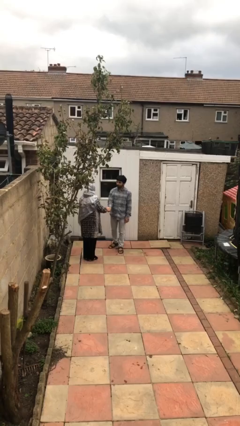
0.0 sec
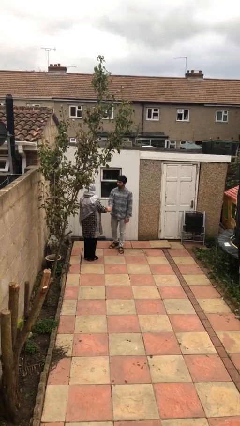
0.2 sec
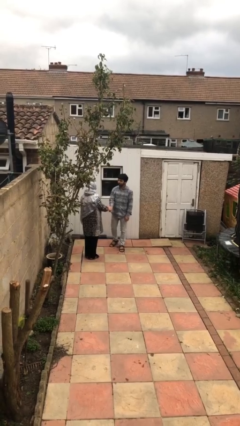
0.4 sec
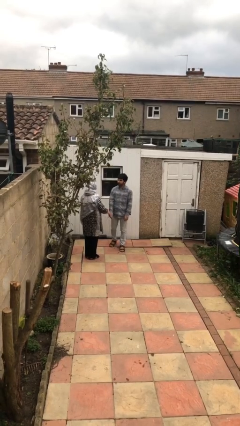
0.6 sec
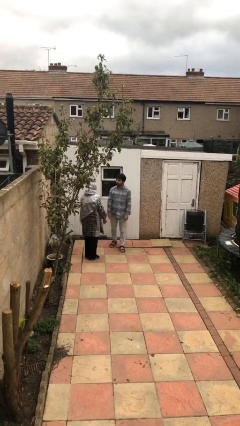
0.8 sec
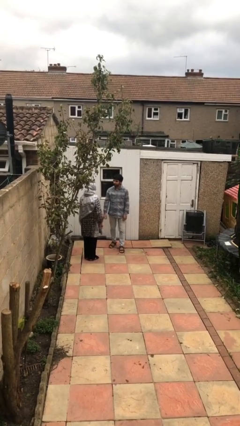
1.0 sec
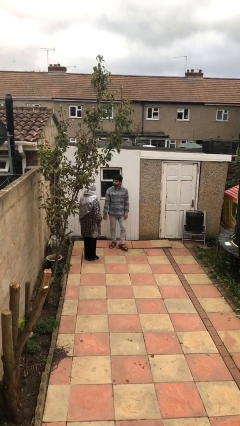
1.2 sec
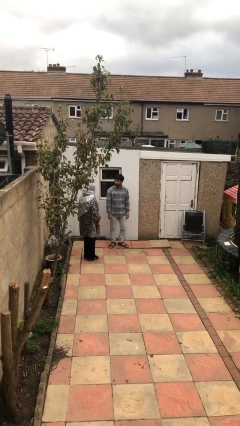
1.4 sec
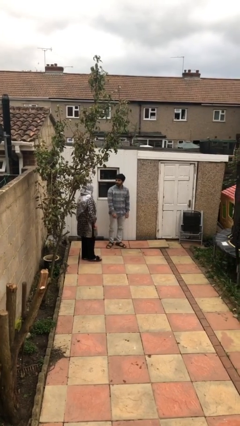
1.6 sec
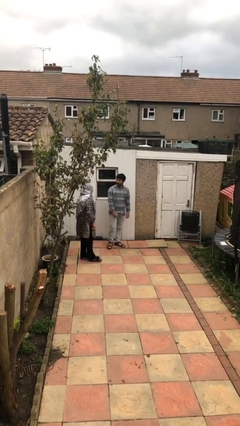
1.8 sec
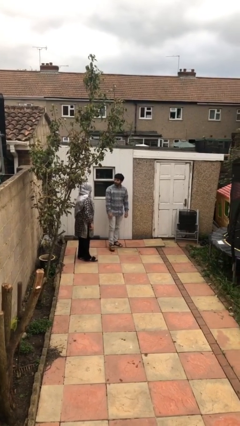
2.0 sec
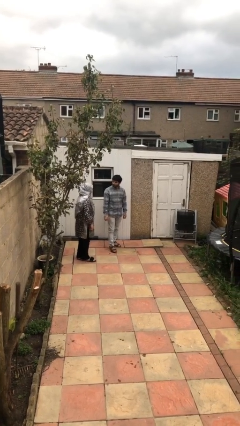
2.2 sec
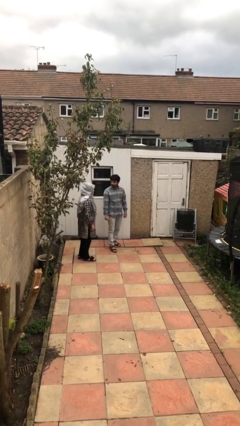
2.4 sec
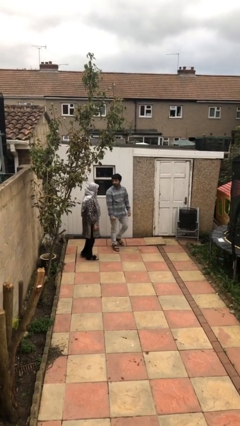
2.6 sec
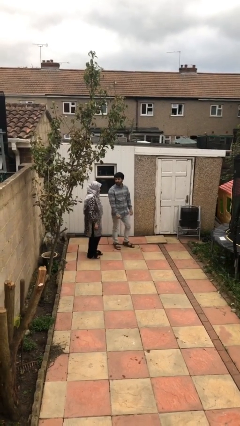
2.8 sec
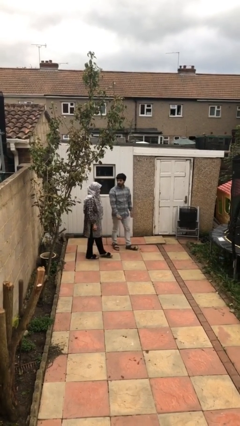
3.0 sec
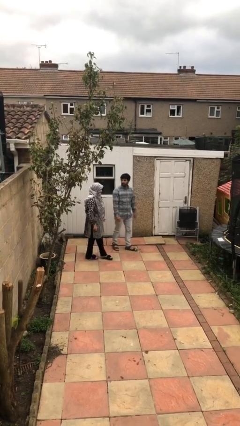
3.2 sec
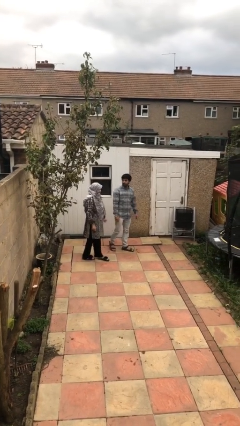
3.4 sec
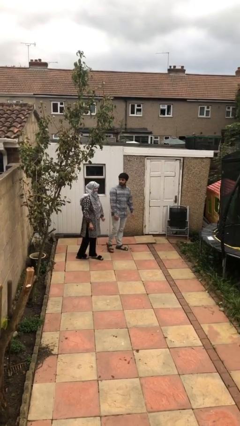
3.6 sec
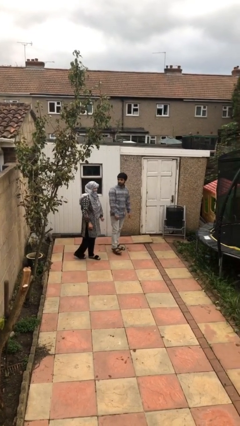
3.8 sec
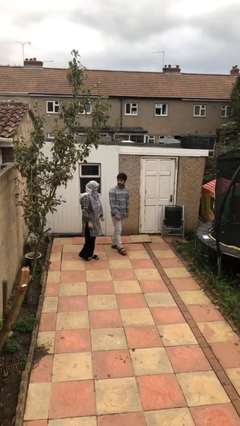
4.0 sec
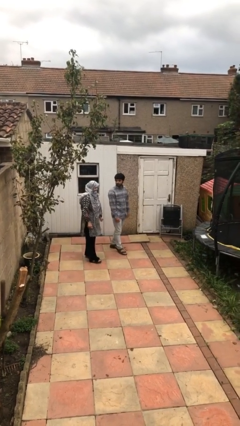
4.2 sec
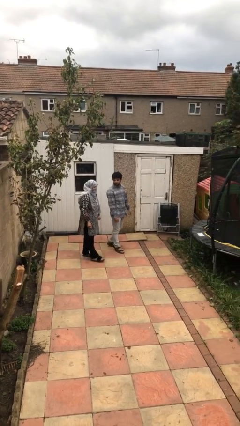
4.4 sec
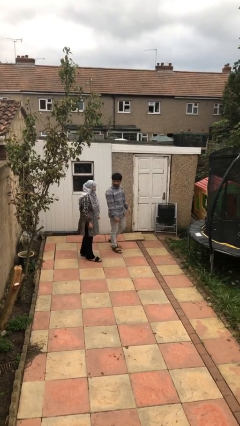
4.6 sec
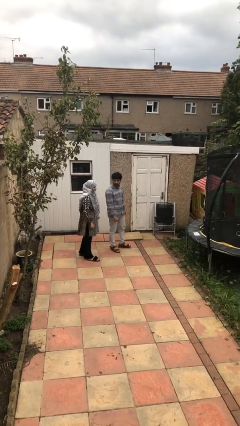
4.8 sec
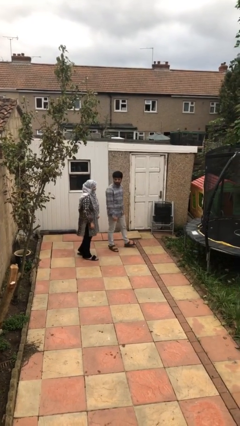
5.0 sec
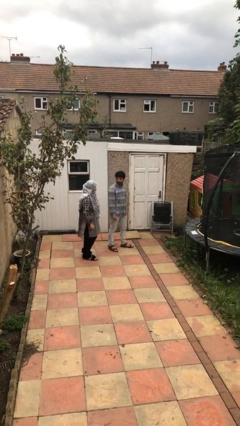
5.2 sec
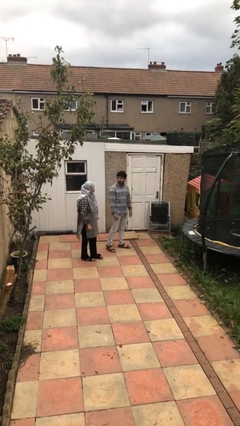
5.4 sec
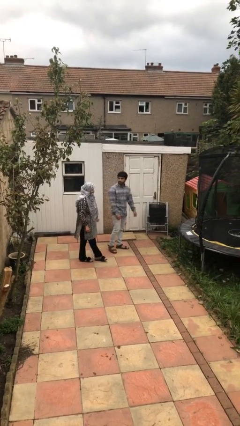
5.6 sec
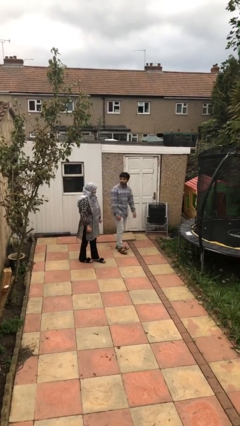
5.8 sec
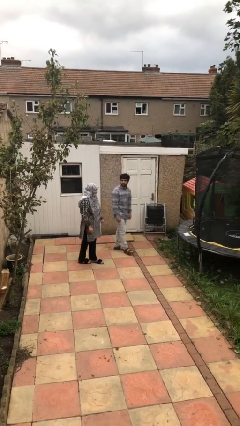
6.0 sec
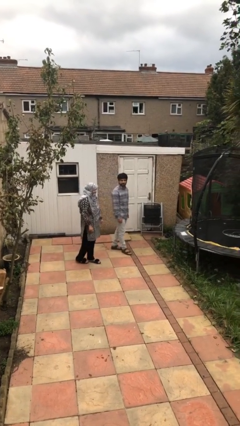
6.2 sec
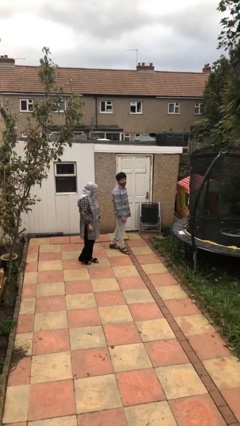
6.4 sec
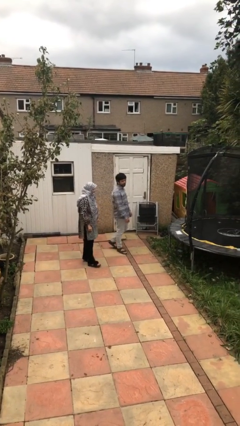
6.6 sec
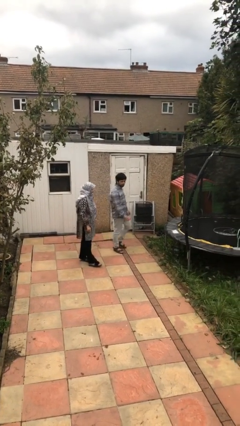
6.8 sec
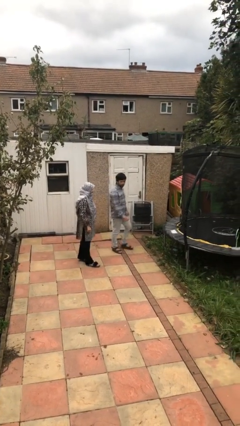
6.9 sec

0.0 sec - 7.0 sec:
person talks to person

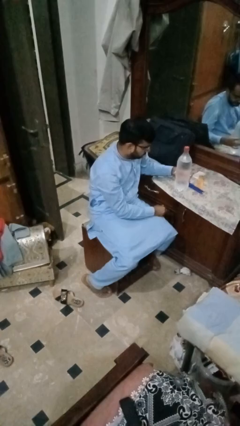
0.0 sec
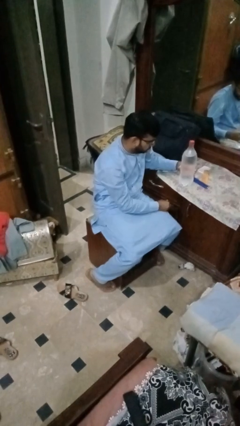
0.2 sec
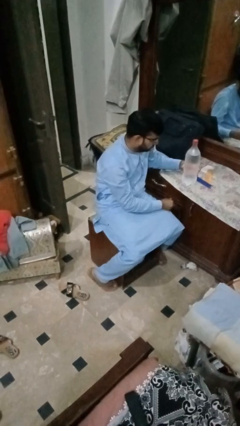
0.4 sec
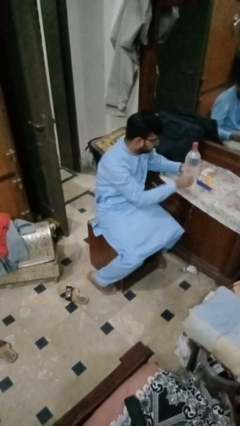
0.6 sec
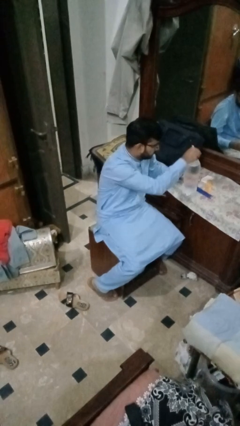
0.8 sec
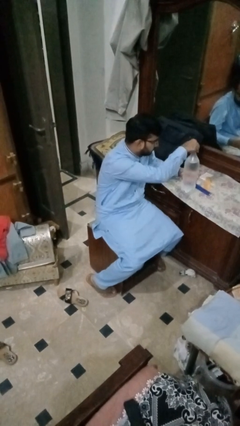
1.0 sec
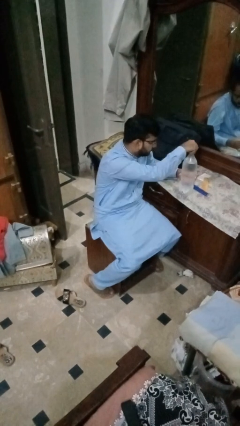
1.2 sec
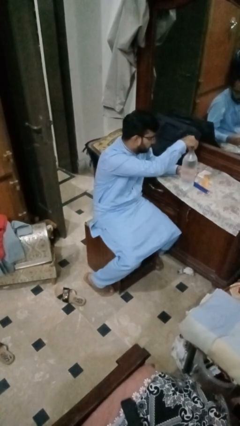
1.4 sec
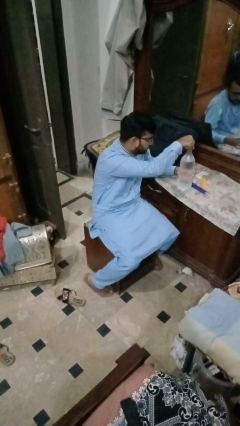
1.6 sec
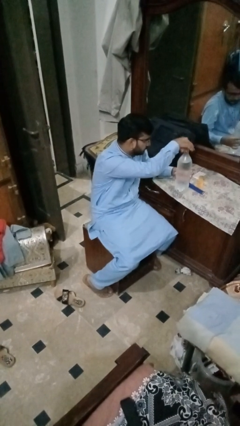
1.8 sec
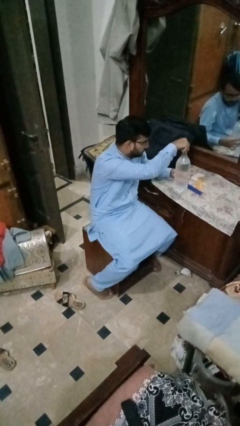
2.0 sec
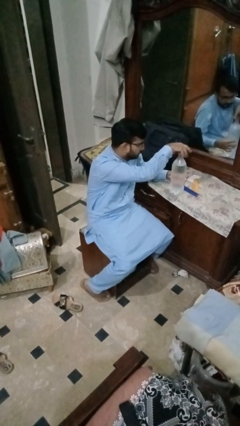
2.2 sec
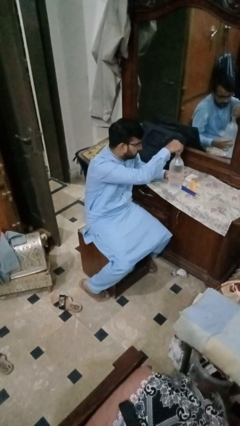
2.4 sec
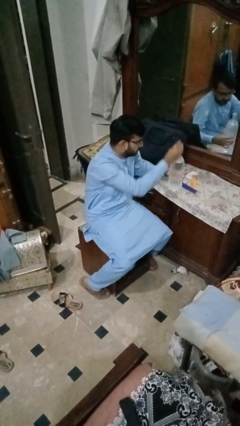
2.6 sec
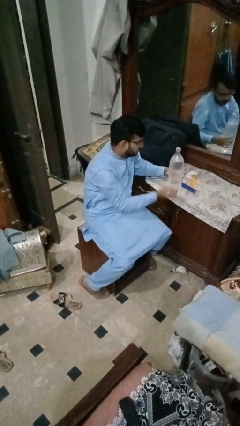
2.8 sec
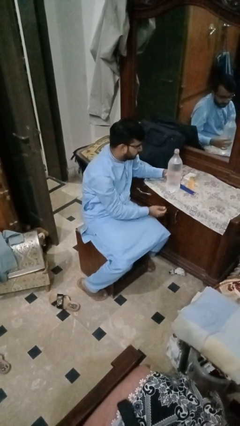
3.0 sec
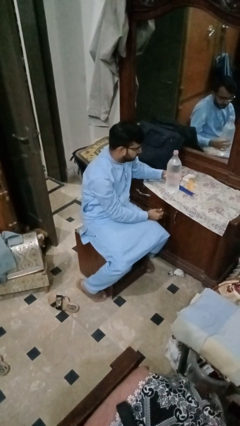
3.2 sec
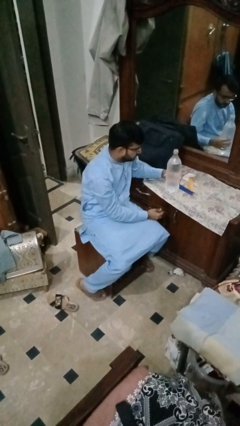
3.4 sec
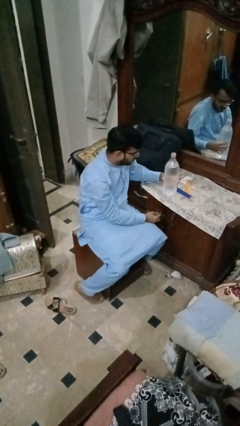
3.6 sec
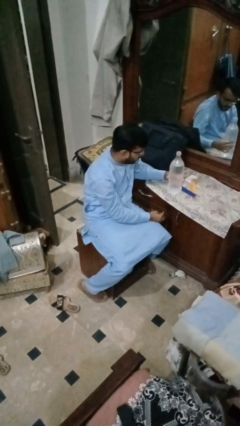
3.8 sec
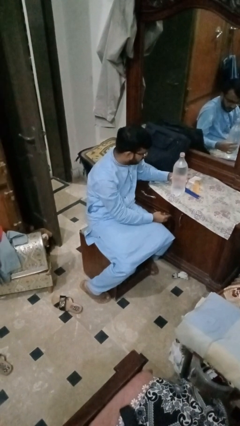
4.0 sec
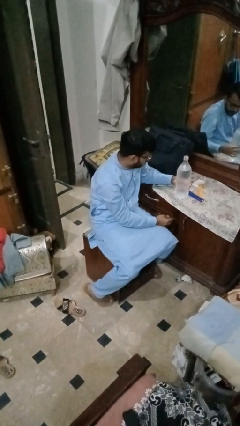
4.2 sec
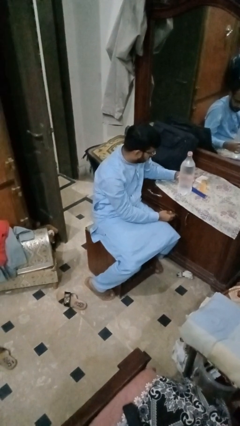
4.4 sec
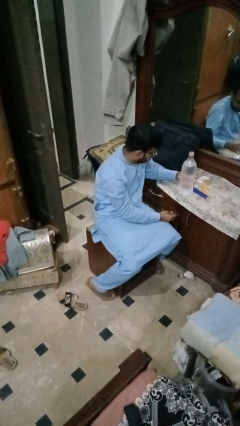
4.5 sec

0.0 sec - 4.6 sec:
person unscrews lid from bottle

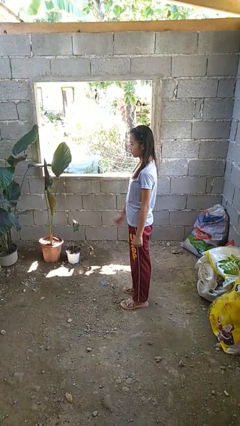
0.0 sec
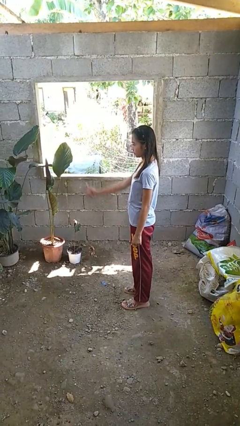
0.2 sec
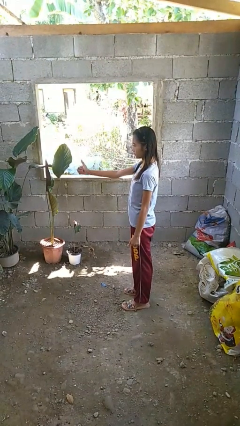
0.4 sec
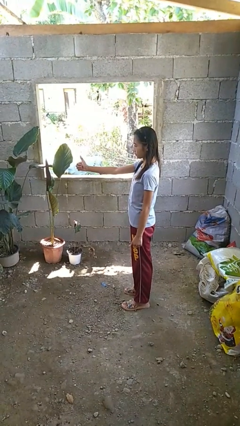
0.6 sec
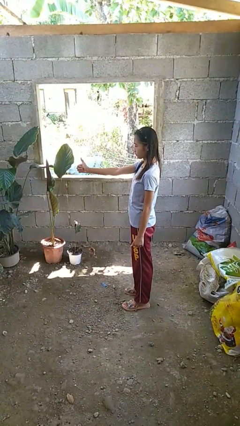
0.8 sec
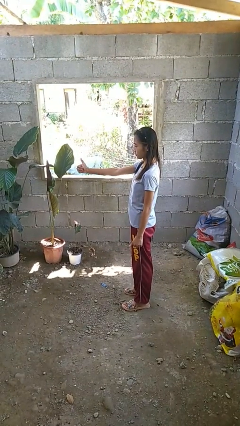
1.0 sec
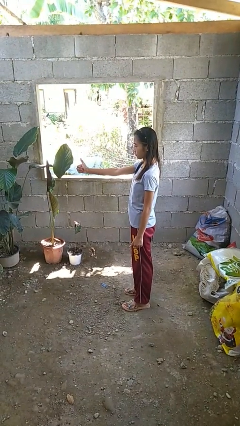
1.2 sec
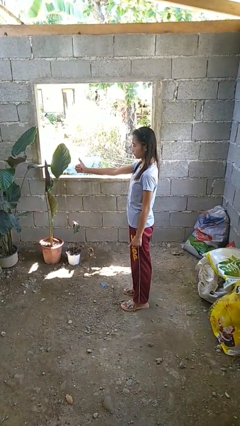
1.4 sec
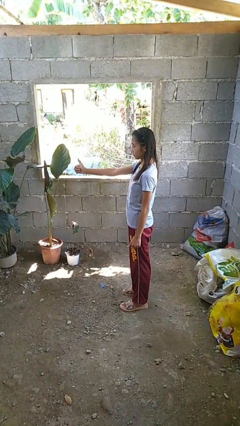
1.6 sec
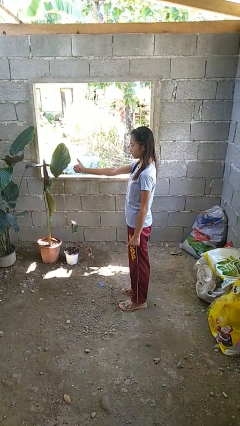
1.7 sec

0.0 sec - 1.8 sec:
person gestures thumbs up

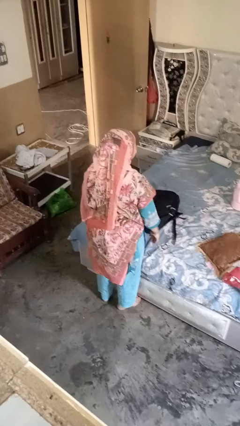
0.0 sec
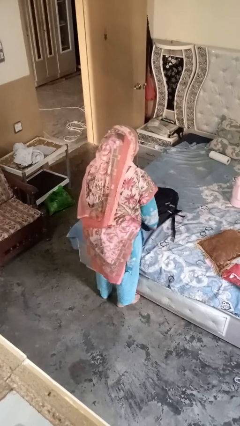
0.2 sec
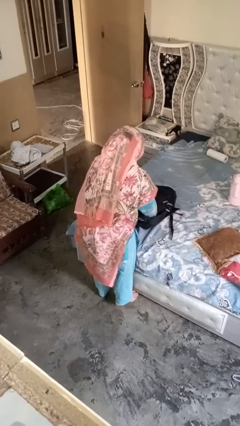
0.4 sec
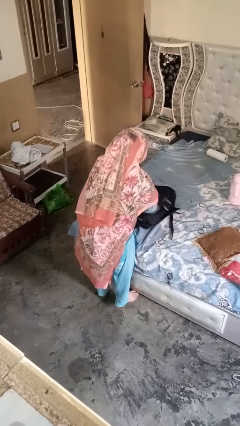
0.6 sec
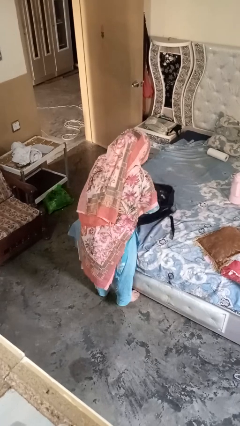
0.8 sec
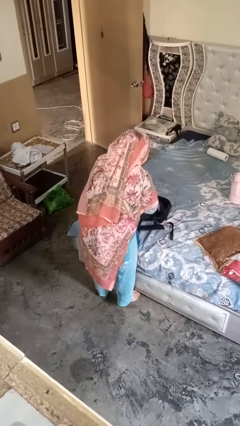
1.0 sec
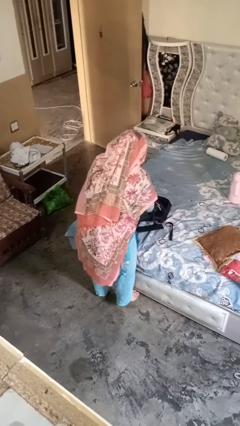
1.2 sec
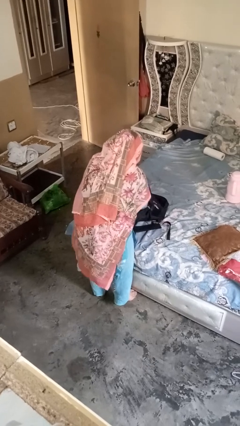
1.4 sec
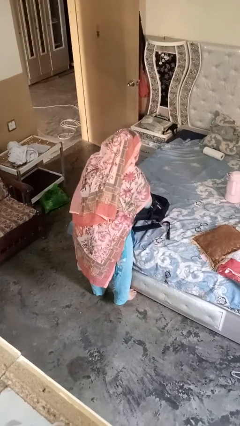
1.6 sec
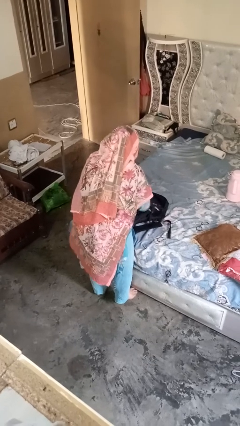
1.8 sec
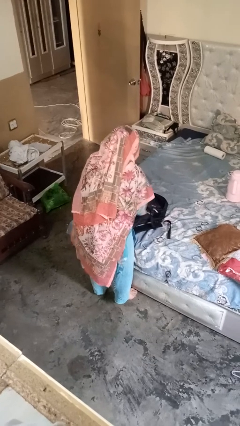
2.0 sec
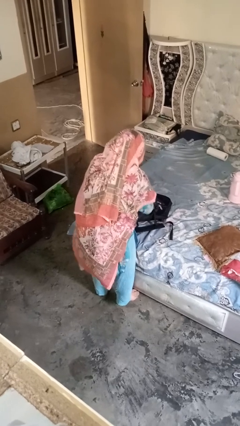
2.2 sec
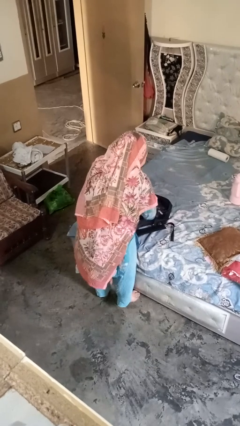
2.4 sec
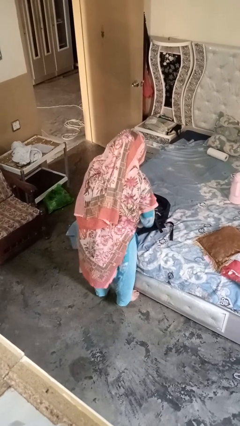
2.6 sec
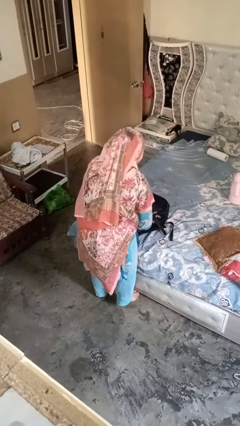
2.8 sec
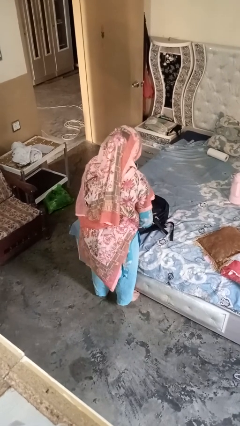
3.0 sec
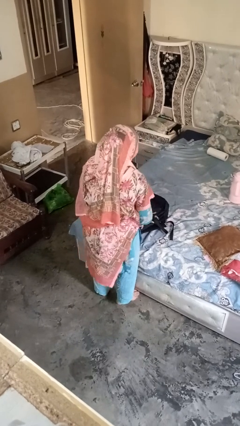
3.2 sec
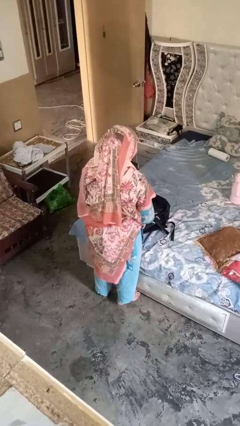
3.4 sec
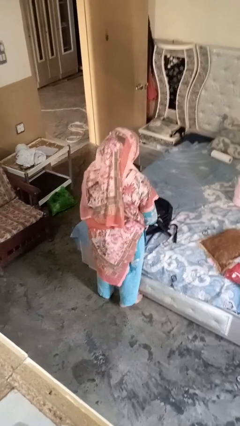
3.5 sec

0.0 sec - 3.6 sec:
person searches in bag

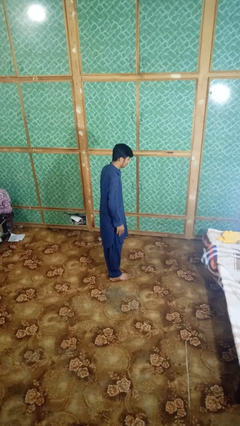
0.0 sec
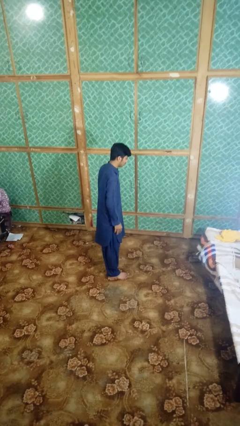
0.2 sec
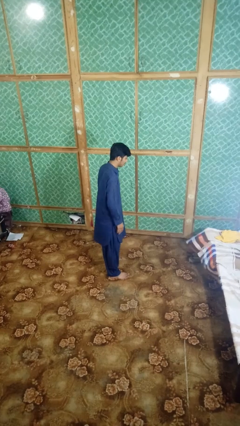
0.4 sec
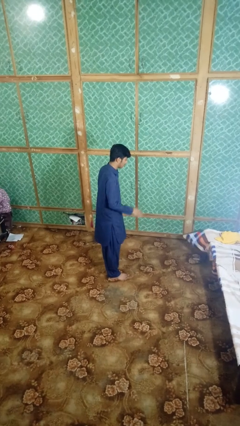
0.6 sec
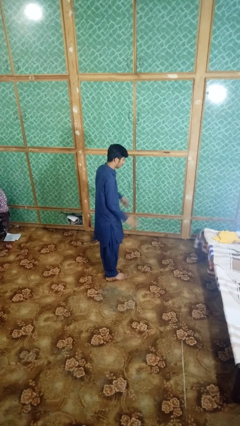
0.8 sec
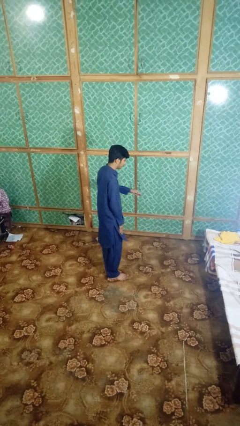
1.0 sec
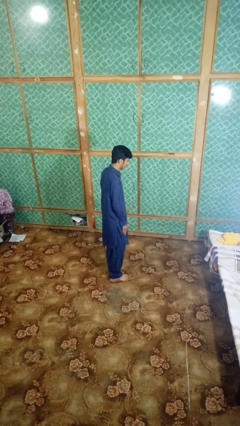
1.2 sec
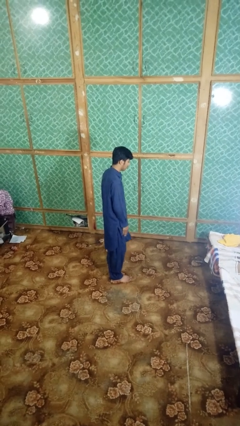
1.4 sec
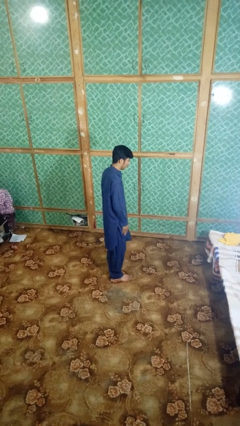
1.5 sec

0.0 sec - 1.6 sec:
person slaps hands on thighs
